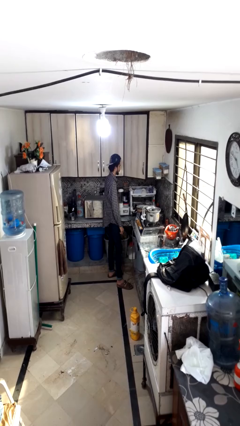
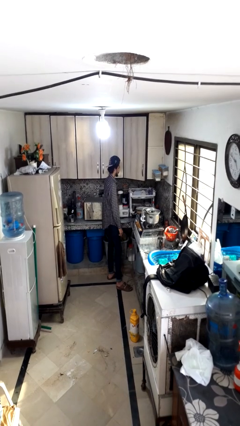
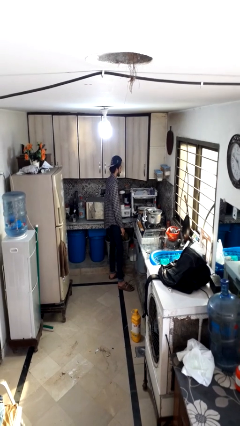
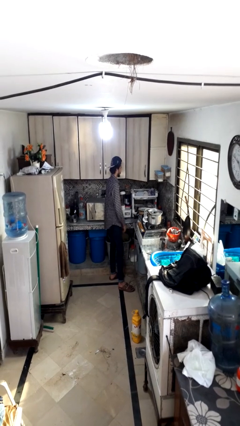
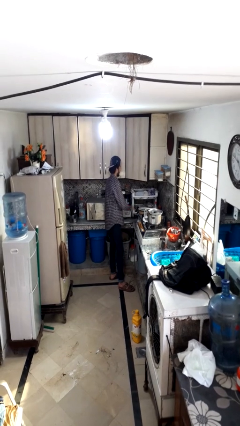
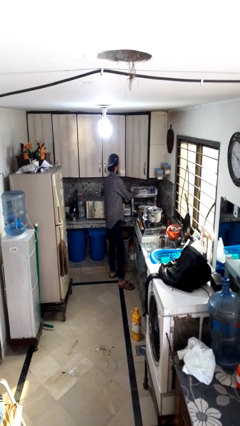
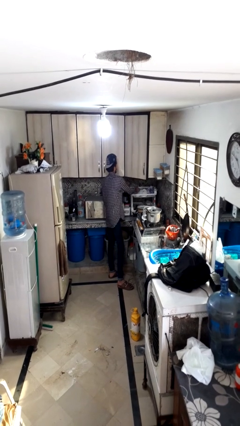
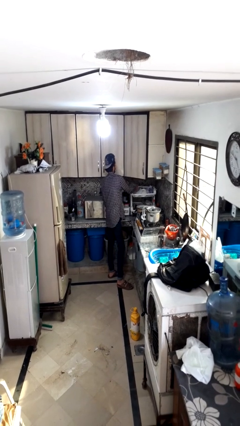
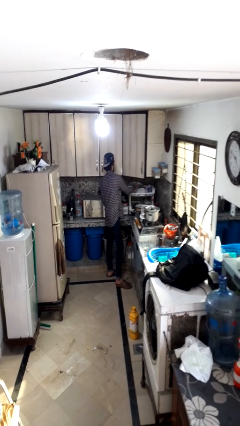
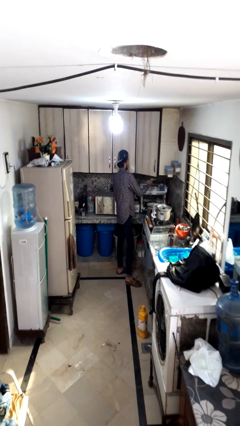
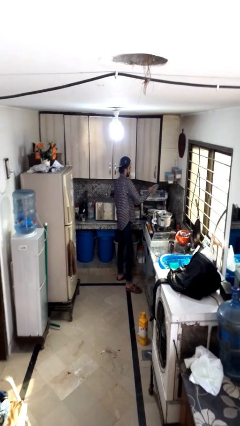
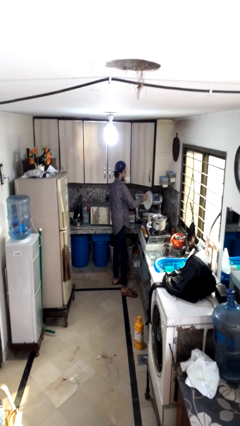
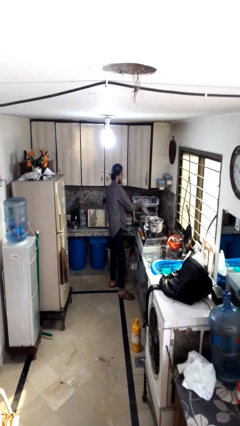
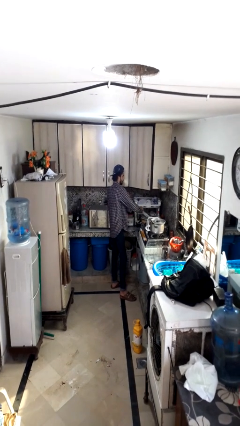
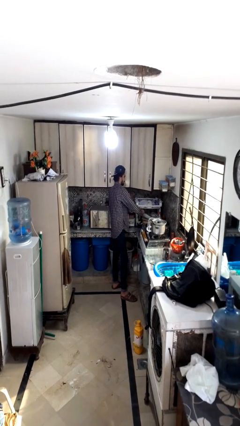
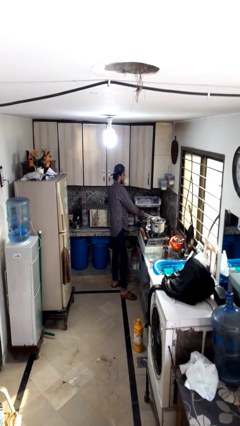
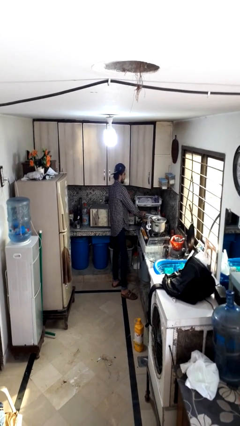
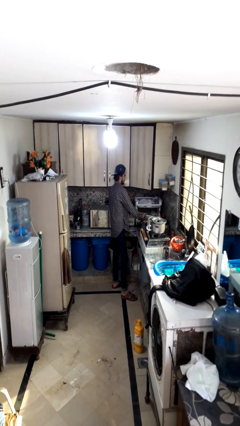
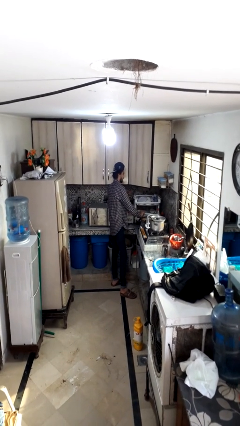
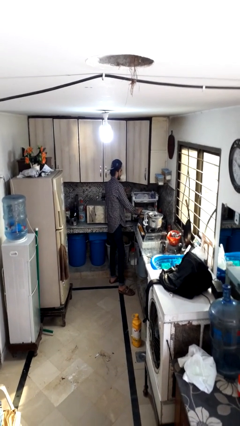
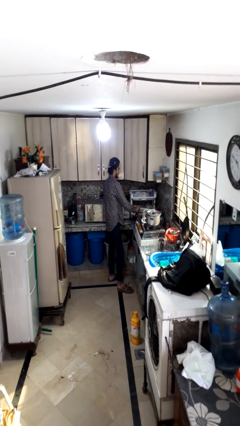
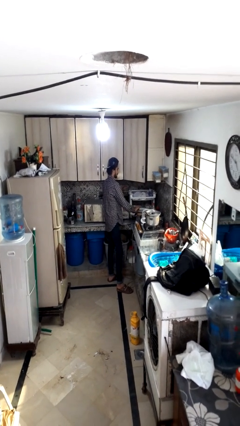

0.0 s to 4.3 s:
person unloads dishwasher

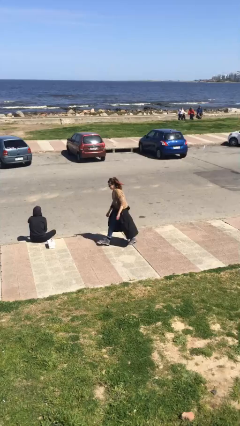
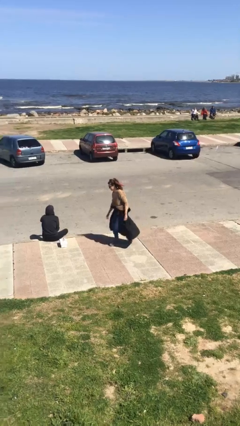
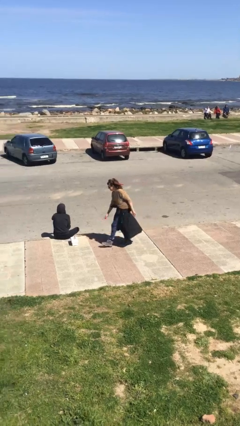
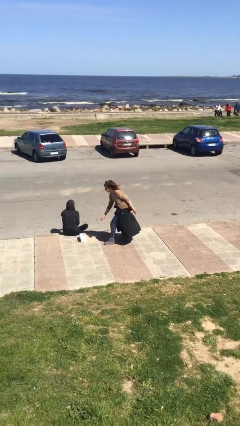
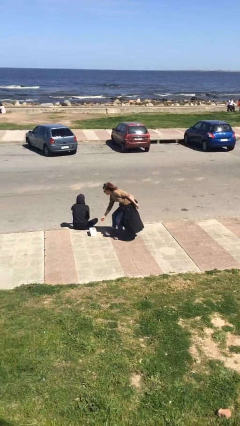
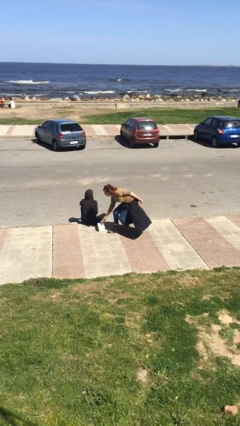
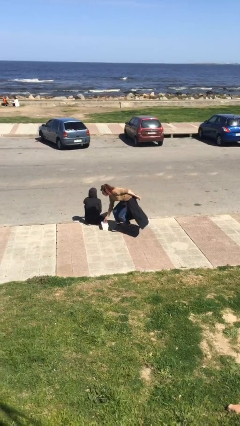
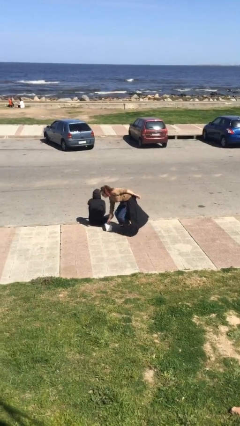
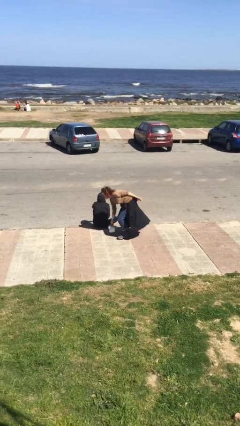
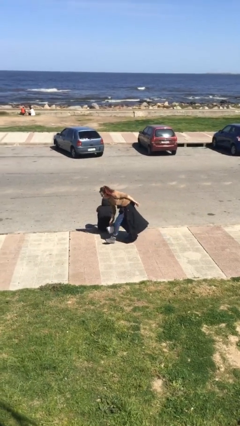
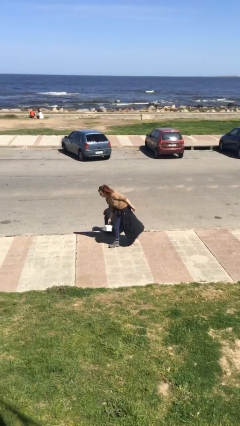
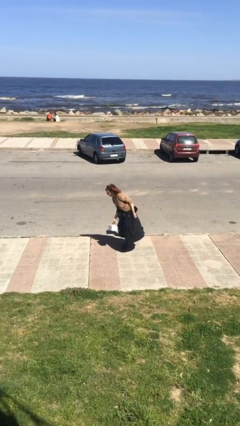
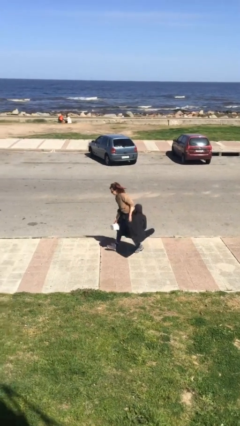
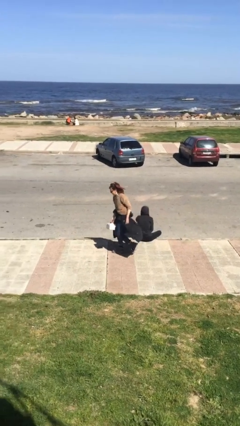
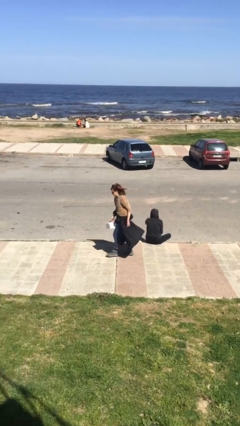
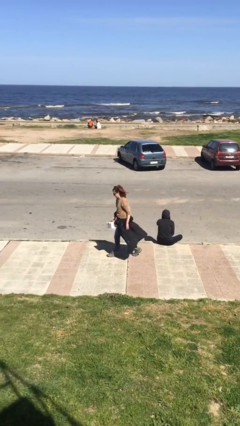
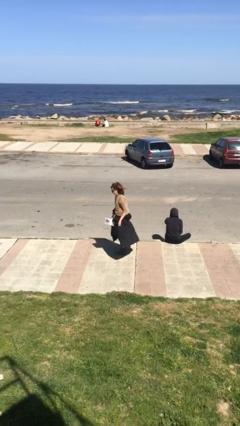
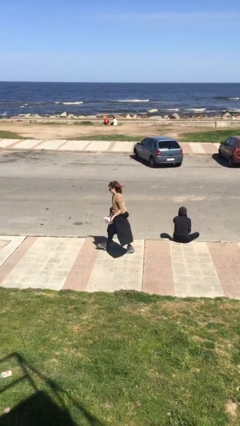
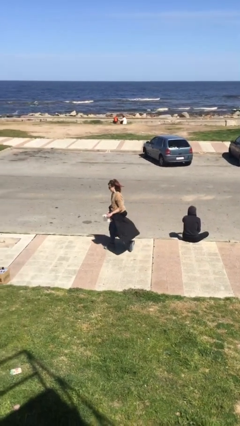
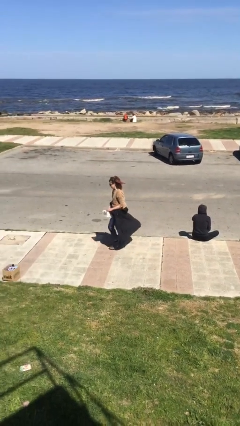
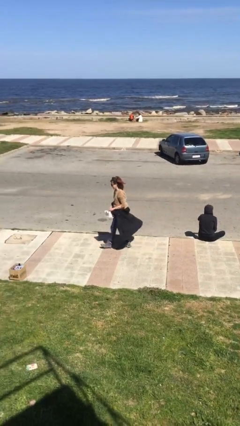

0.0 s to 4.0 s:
person steals object from person

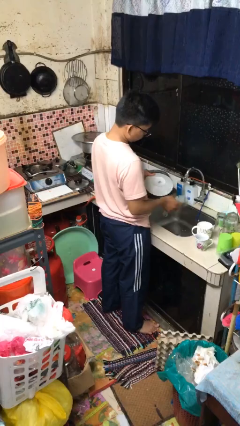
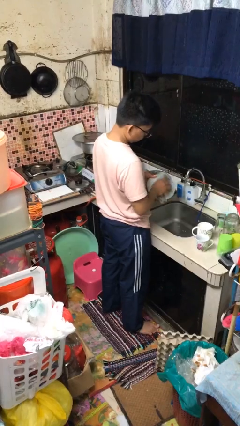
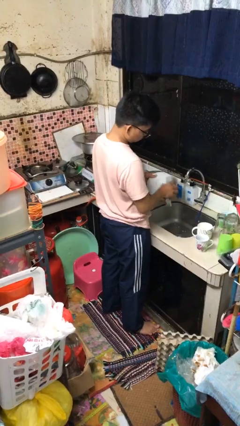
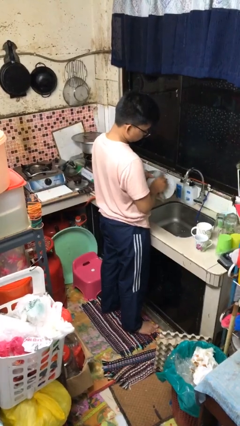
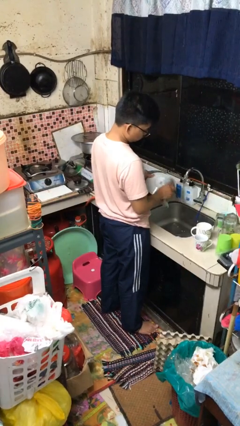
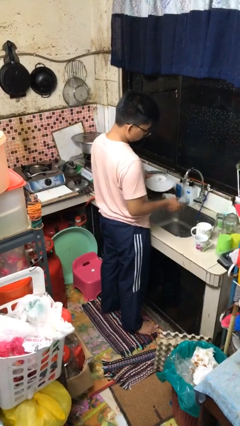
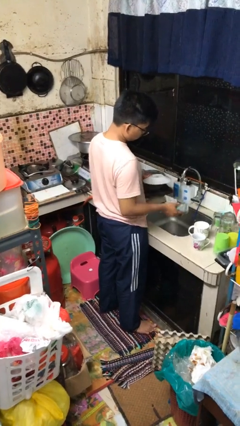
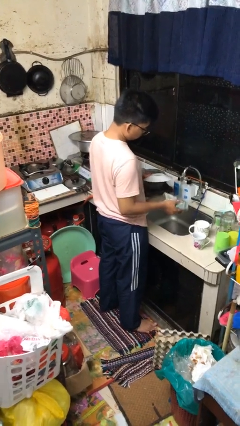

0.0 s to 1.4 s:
person dries dish

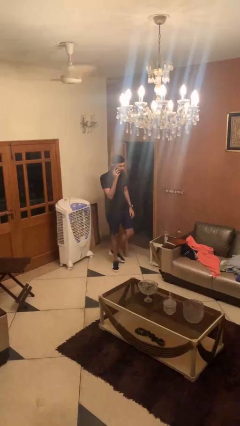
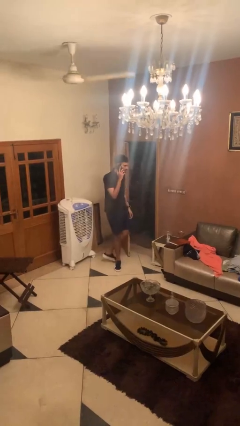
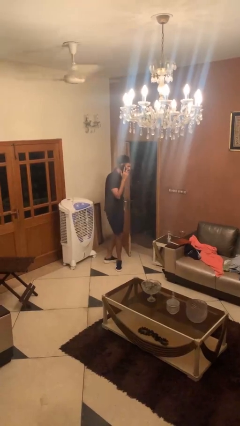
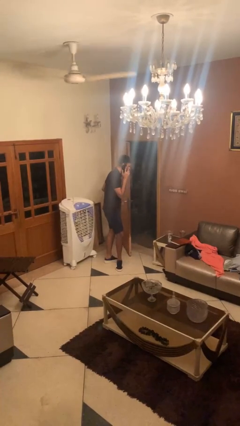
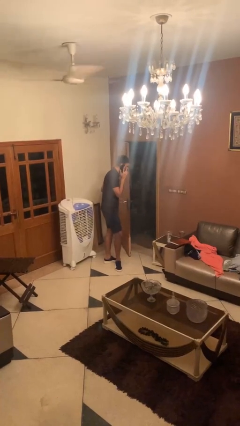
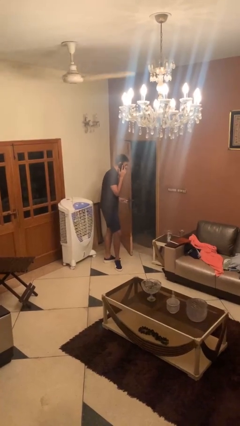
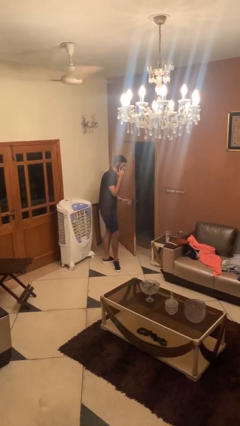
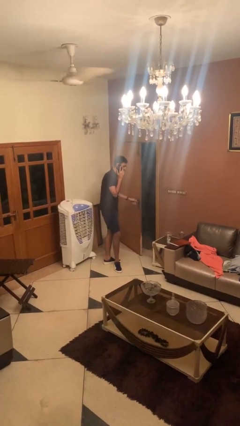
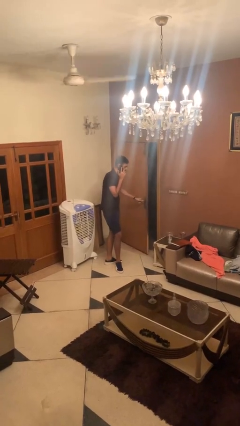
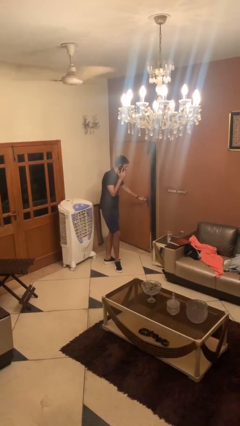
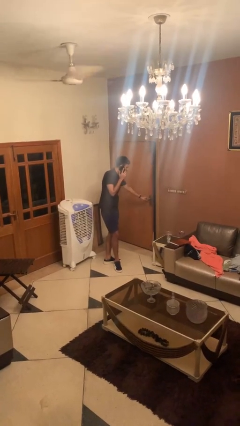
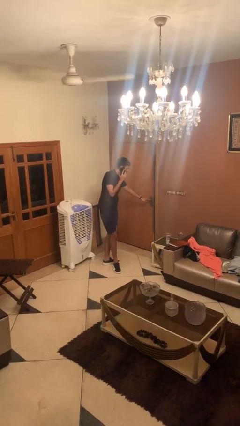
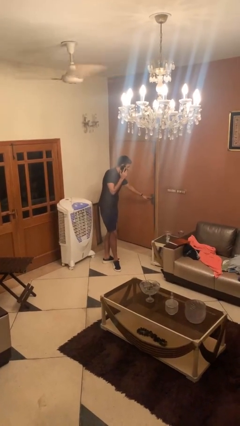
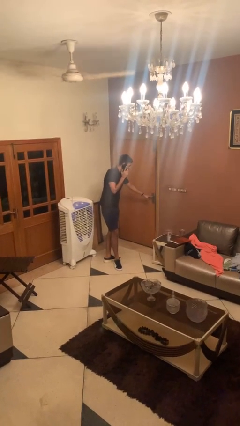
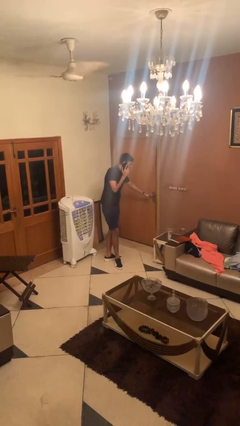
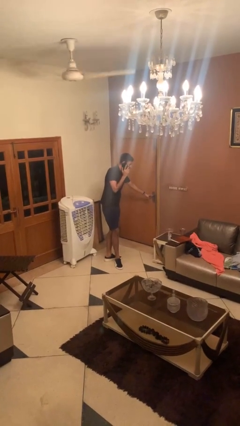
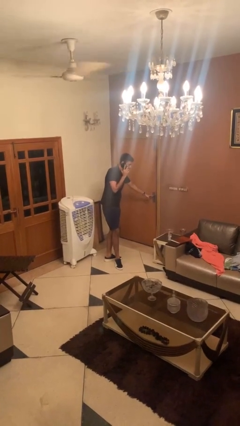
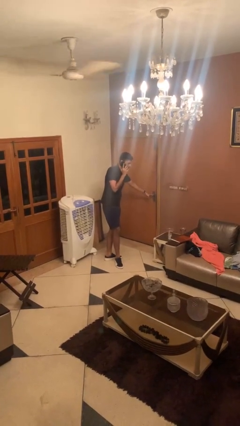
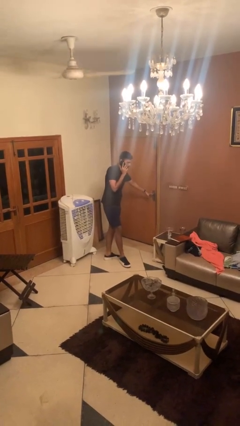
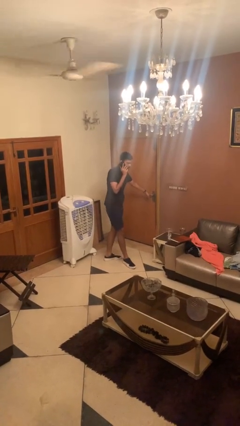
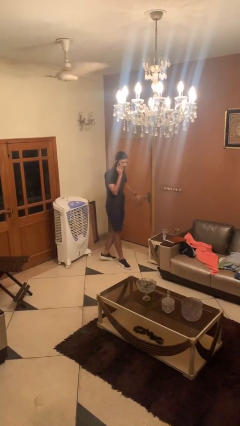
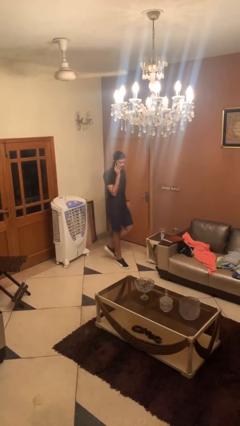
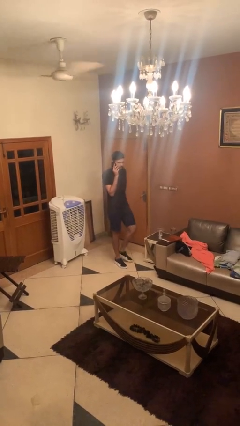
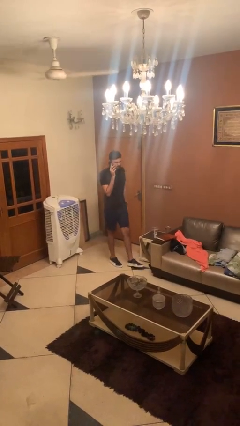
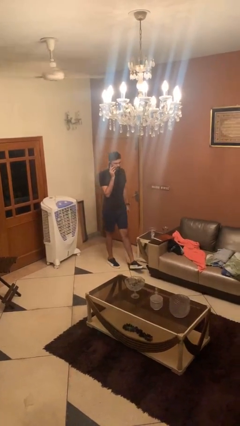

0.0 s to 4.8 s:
person closes facility door

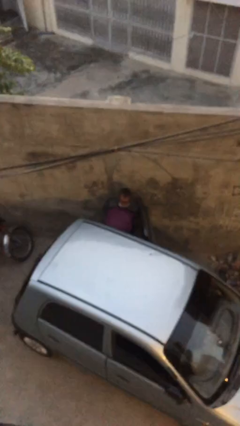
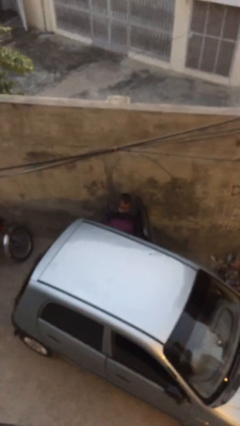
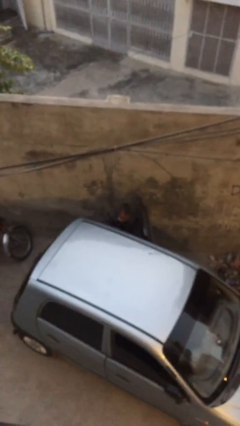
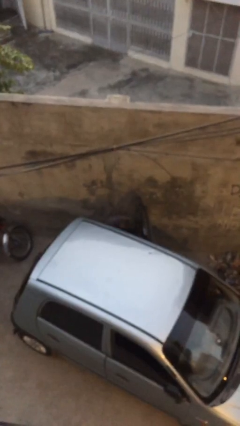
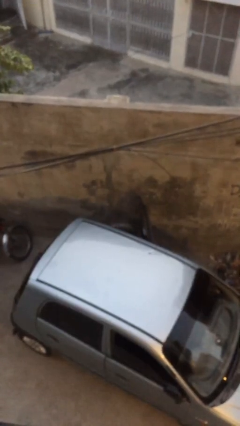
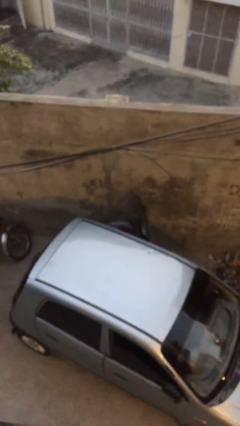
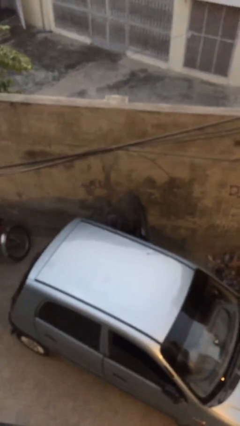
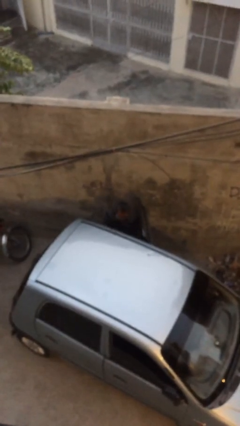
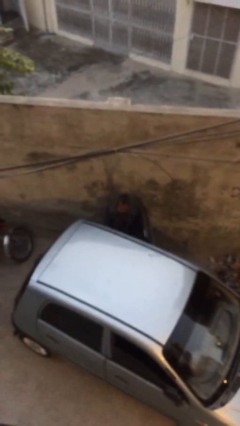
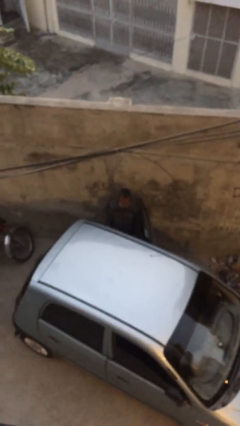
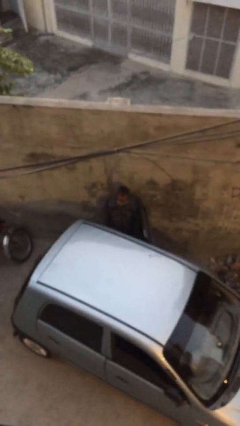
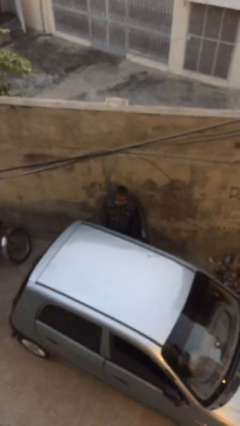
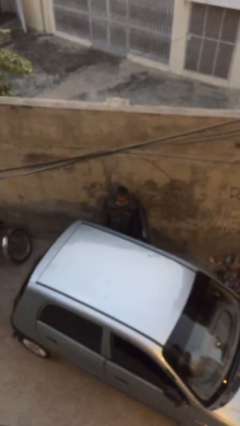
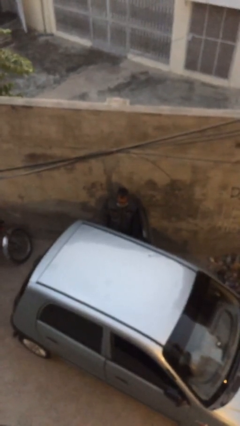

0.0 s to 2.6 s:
person loads car

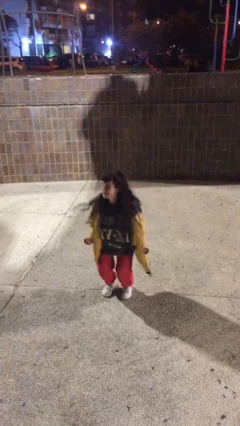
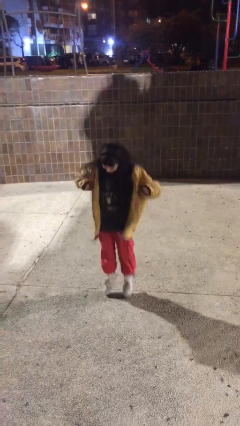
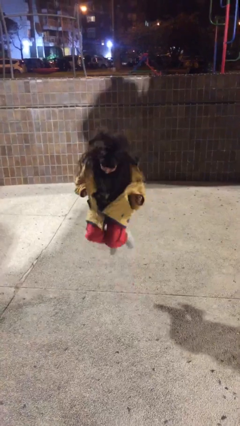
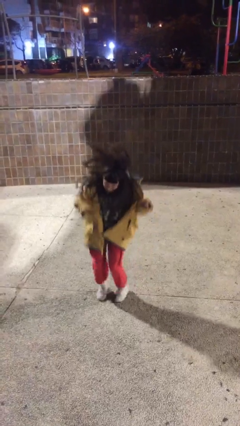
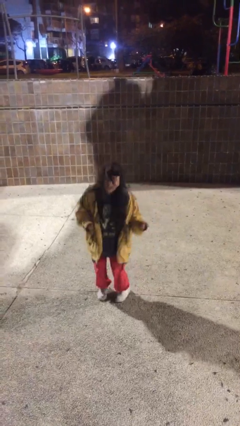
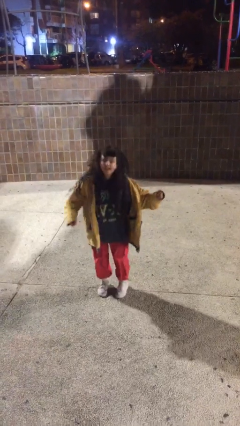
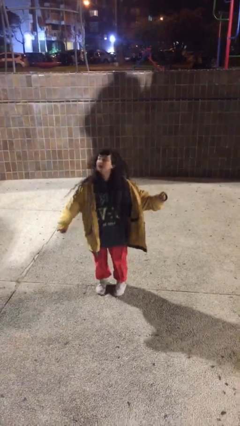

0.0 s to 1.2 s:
person jumps
